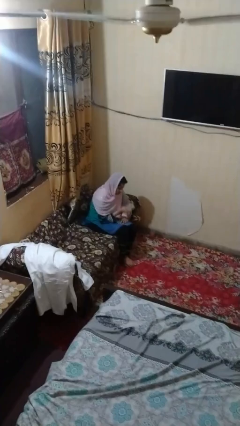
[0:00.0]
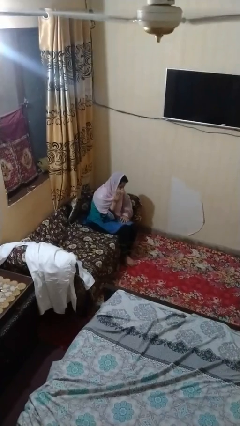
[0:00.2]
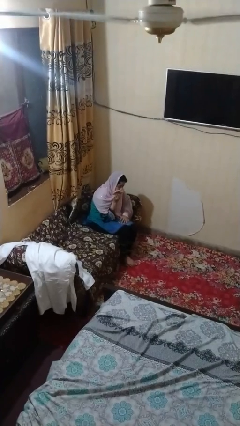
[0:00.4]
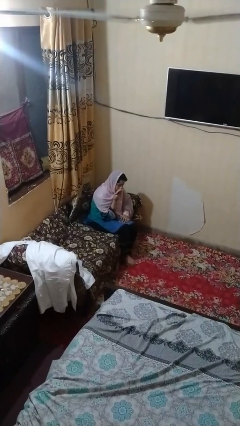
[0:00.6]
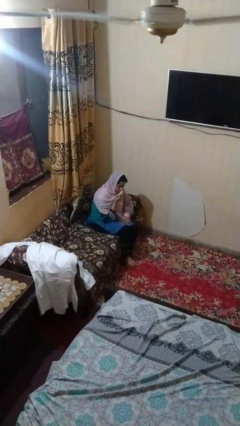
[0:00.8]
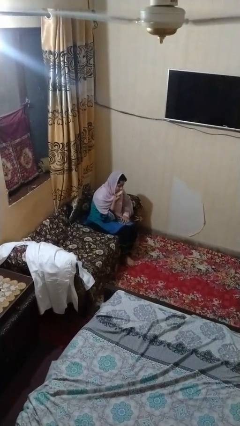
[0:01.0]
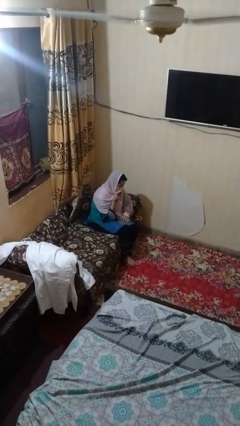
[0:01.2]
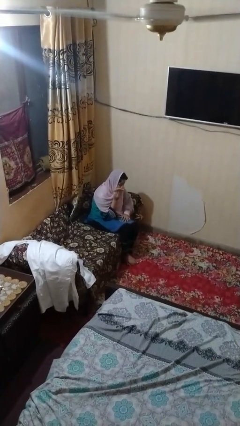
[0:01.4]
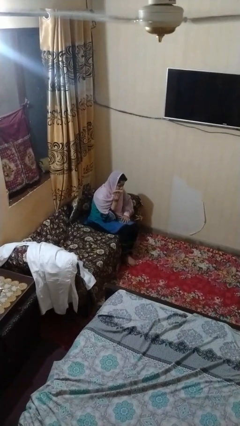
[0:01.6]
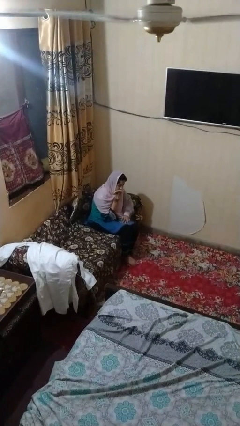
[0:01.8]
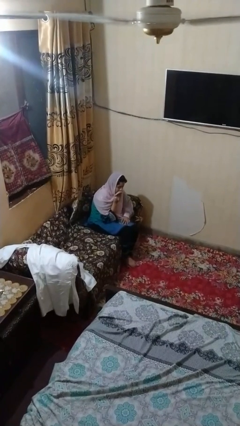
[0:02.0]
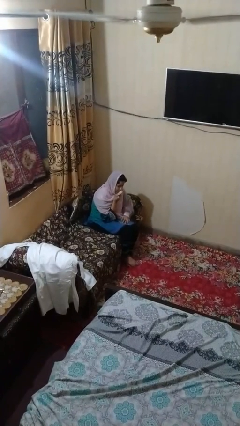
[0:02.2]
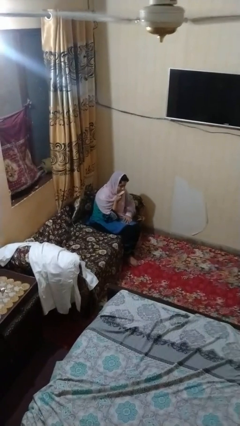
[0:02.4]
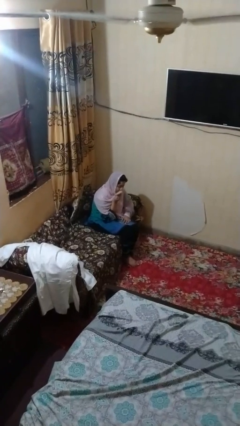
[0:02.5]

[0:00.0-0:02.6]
person wipes mouth with napkin

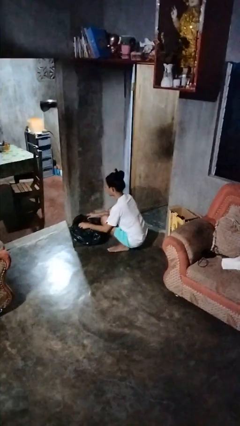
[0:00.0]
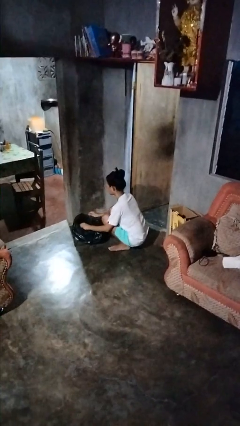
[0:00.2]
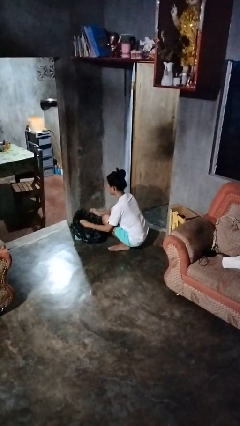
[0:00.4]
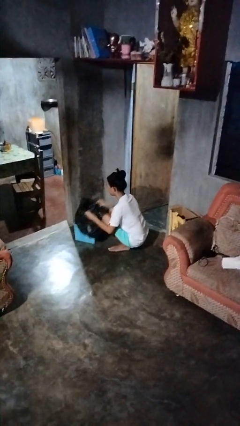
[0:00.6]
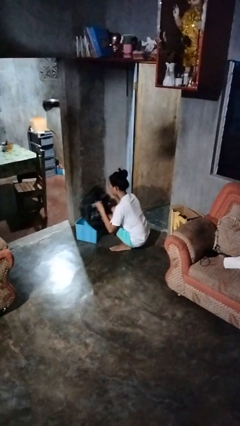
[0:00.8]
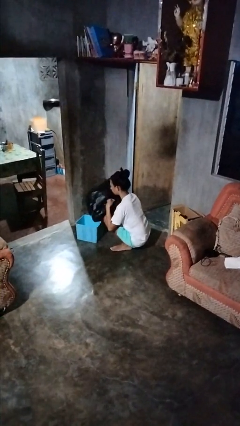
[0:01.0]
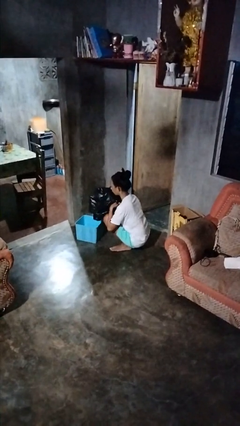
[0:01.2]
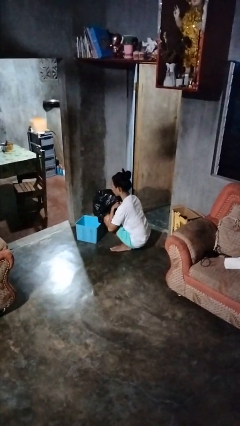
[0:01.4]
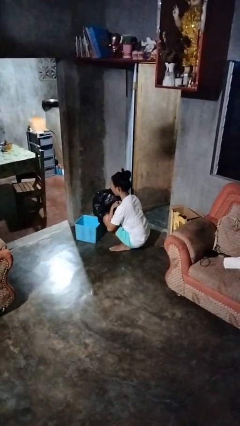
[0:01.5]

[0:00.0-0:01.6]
person removes trashbag from trashcan

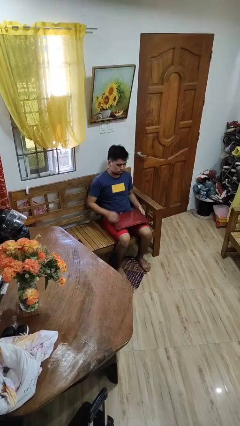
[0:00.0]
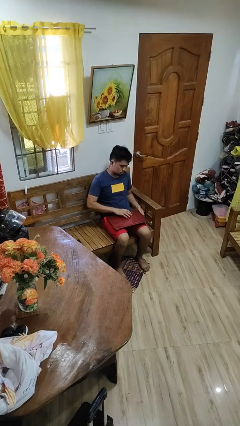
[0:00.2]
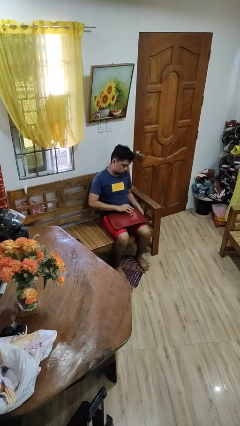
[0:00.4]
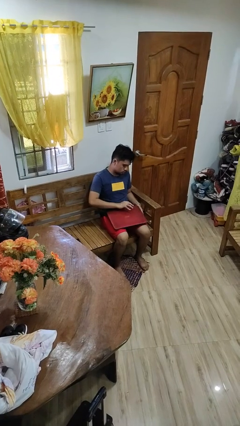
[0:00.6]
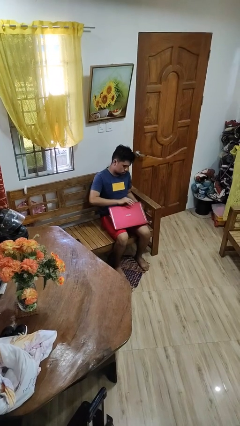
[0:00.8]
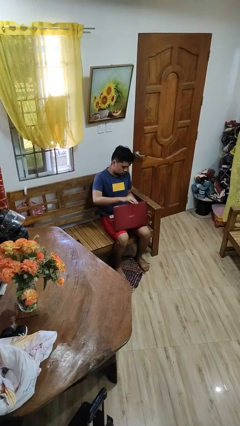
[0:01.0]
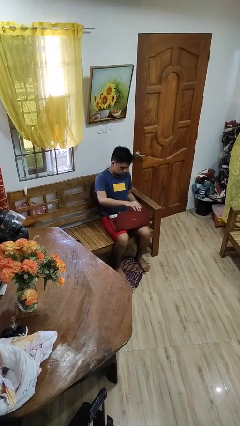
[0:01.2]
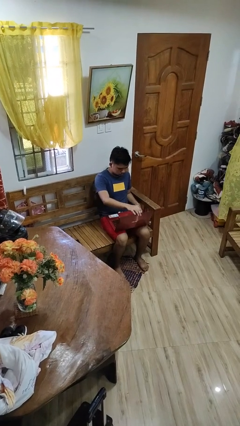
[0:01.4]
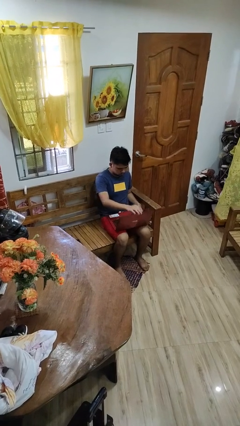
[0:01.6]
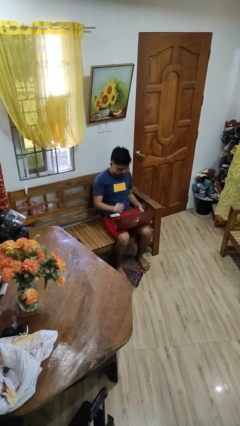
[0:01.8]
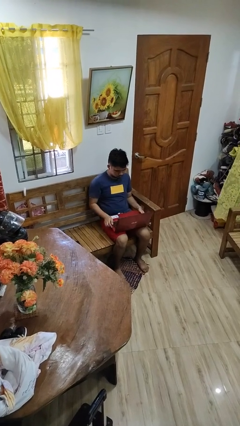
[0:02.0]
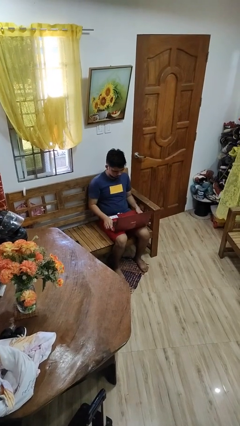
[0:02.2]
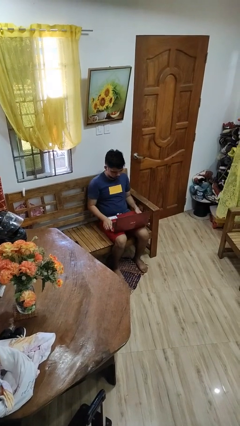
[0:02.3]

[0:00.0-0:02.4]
person opens laptop

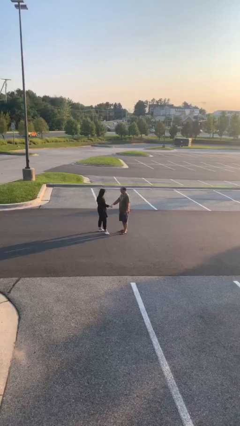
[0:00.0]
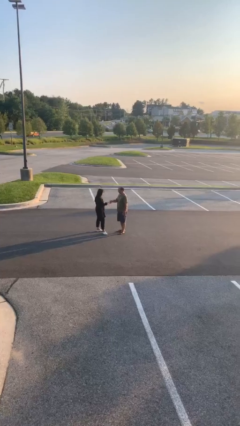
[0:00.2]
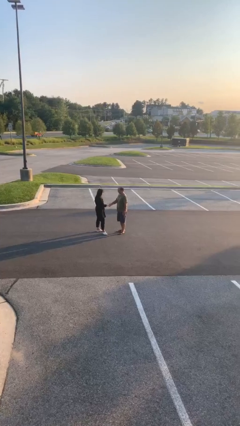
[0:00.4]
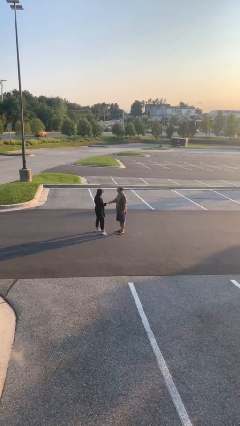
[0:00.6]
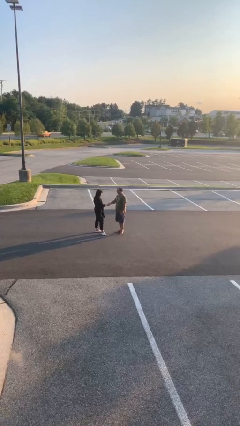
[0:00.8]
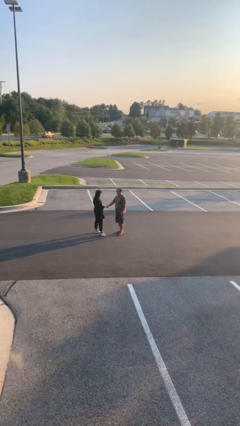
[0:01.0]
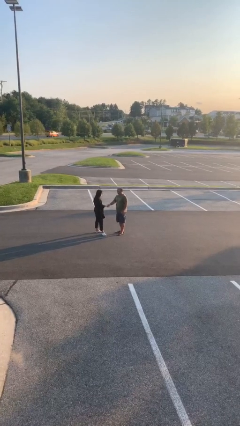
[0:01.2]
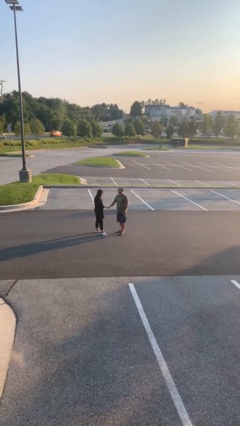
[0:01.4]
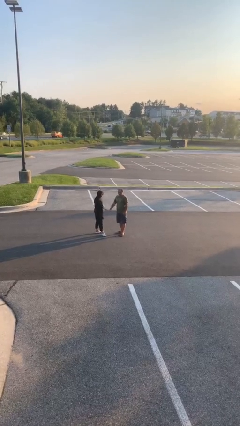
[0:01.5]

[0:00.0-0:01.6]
person shakes hand

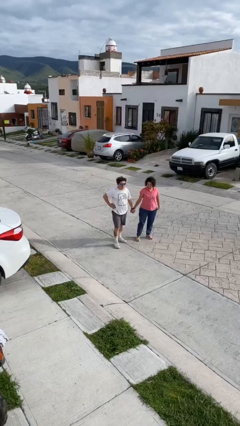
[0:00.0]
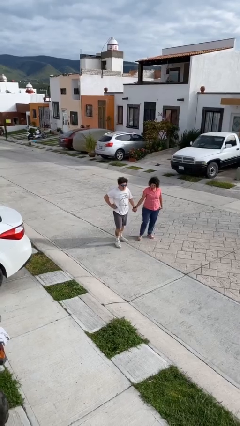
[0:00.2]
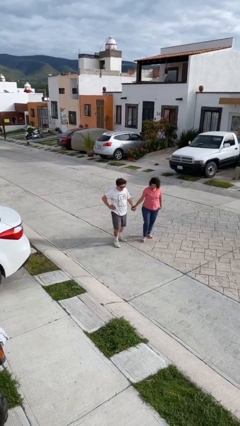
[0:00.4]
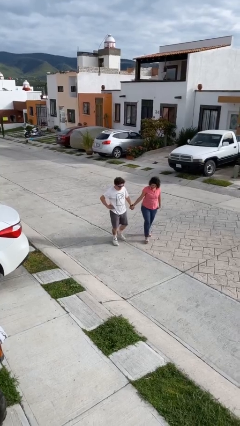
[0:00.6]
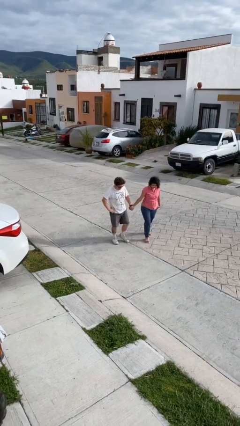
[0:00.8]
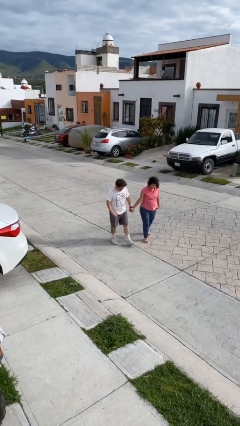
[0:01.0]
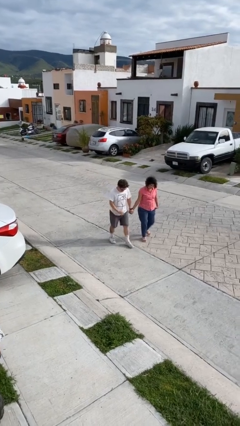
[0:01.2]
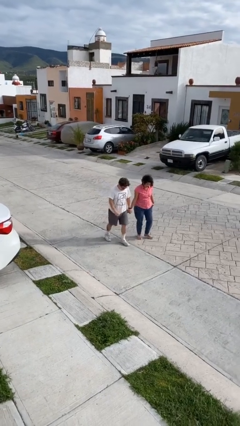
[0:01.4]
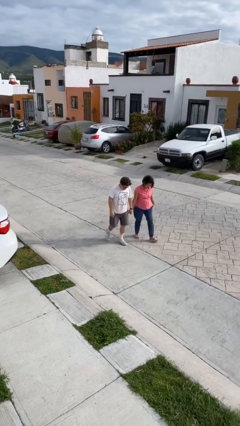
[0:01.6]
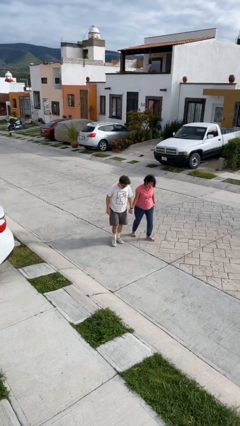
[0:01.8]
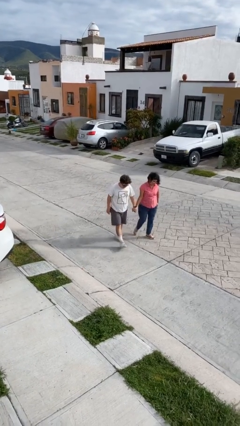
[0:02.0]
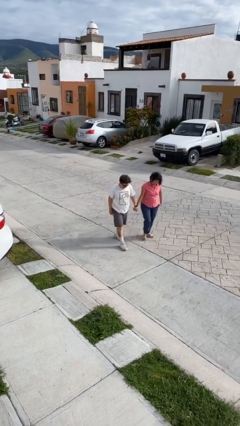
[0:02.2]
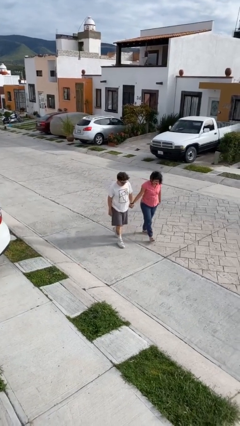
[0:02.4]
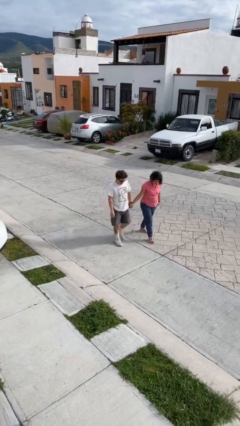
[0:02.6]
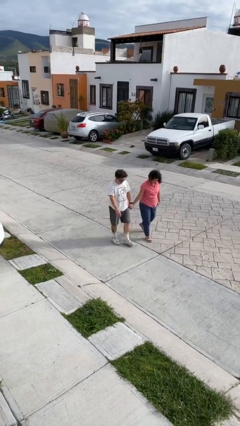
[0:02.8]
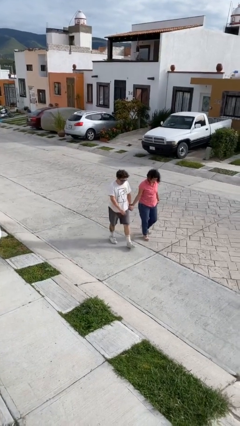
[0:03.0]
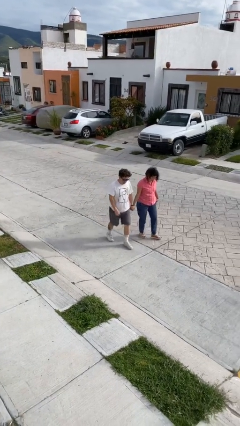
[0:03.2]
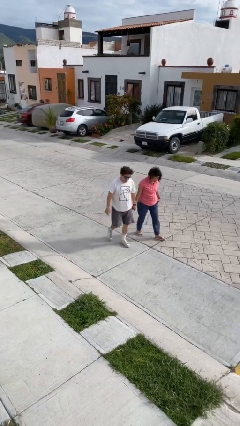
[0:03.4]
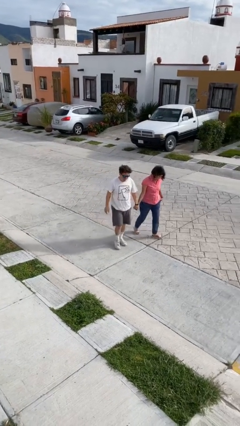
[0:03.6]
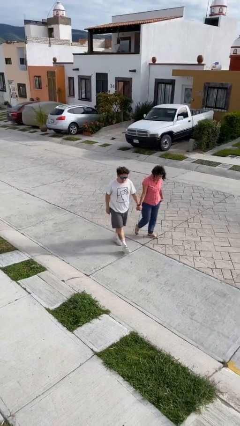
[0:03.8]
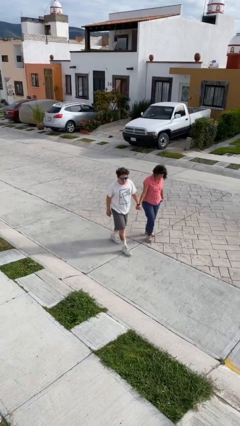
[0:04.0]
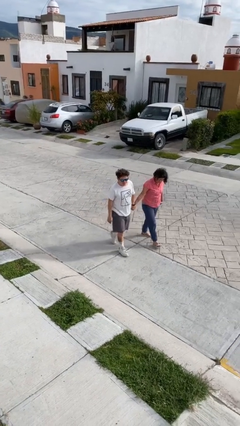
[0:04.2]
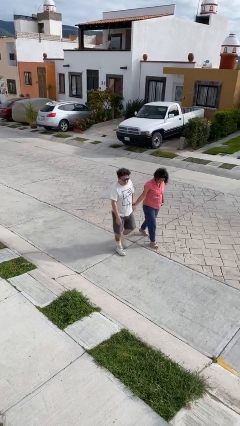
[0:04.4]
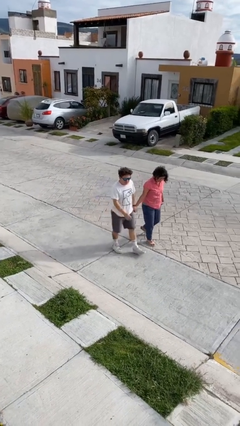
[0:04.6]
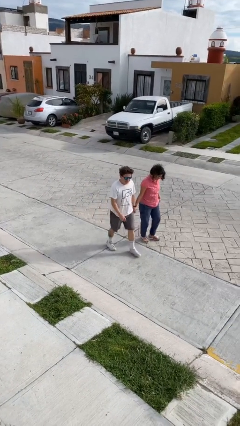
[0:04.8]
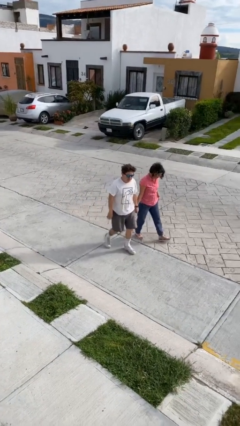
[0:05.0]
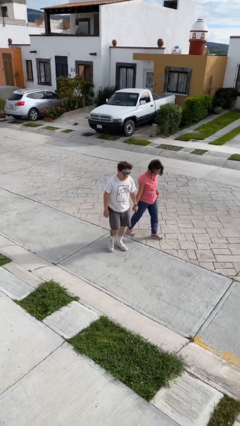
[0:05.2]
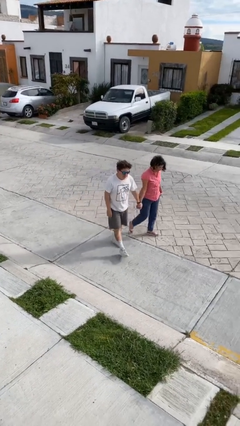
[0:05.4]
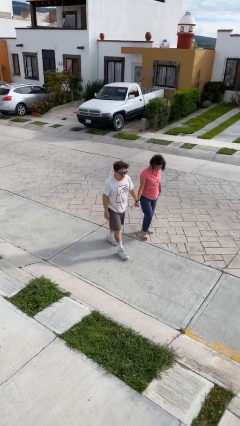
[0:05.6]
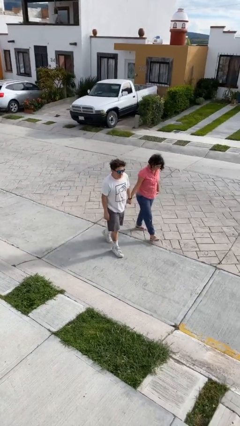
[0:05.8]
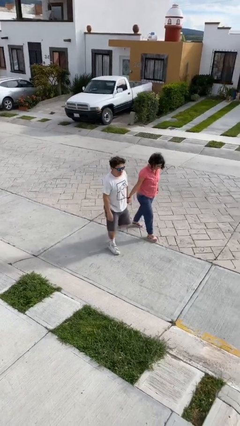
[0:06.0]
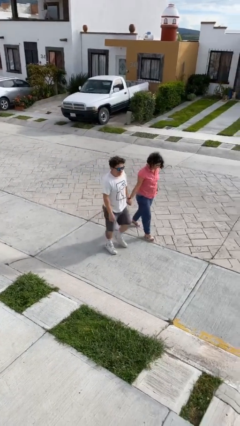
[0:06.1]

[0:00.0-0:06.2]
person holds hand

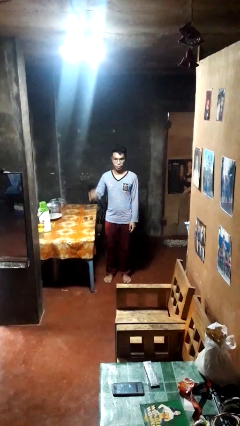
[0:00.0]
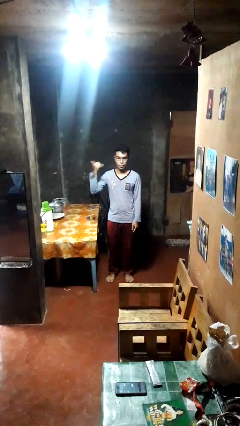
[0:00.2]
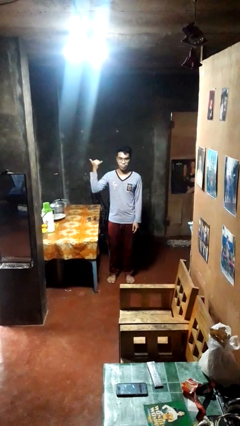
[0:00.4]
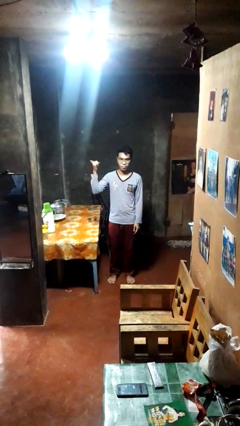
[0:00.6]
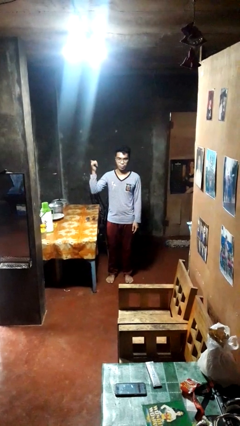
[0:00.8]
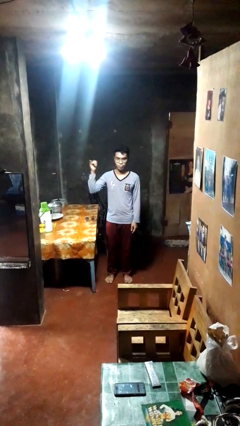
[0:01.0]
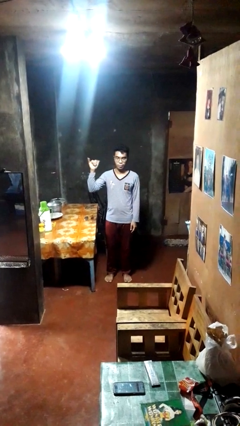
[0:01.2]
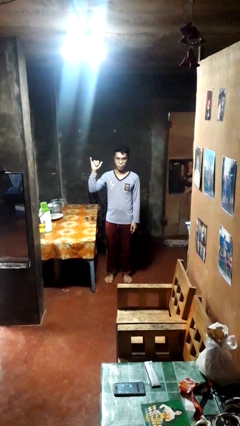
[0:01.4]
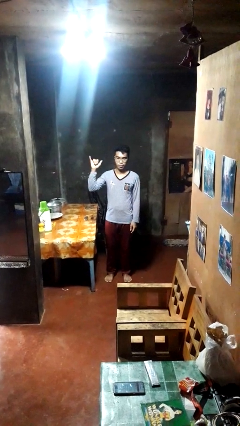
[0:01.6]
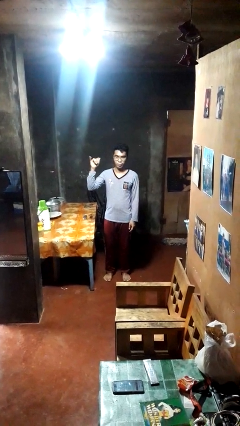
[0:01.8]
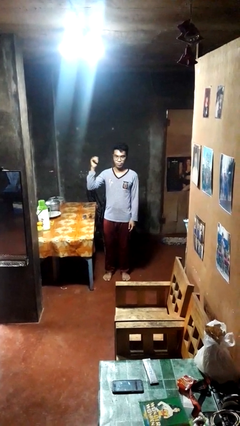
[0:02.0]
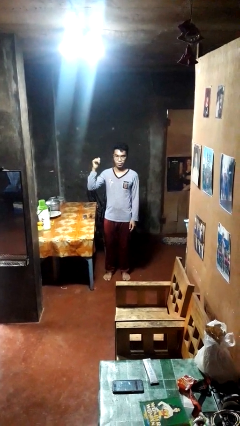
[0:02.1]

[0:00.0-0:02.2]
person gestures hang loose

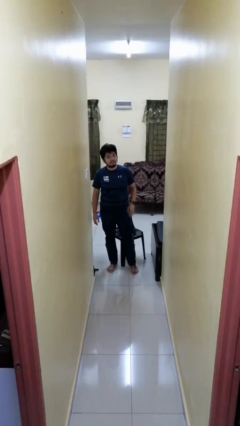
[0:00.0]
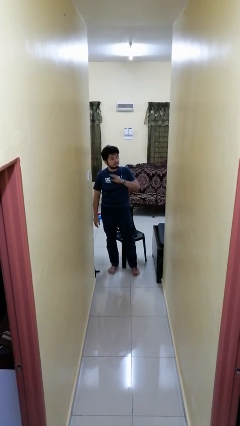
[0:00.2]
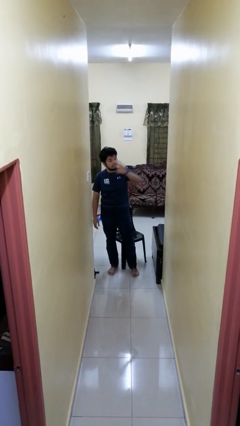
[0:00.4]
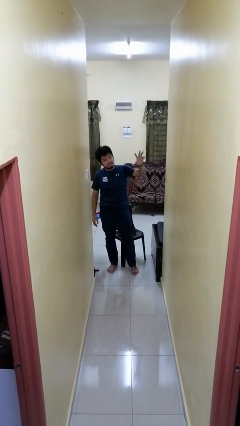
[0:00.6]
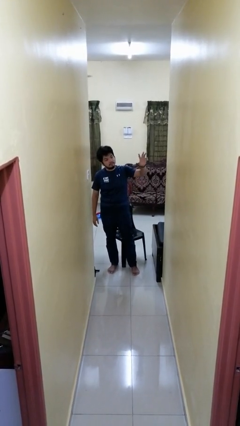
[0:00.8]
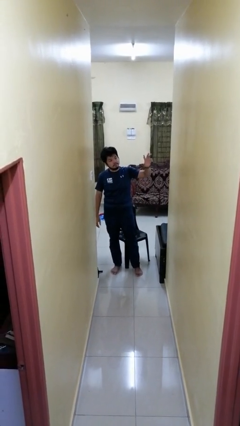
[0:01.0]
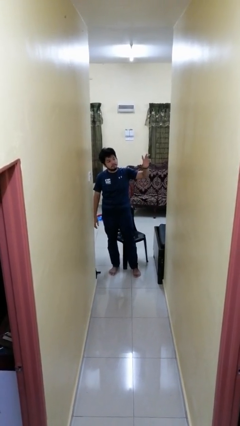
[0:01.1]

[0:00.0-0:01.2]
person gestures swipe left
